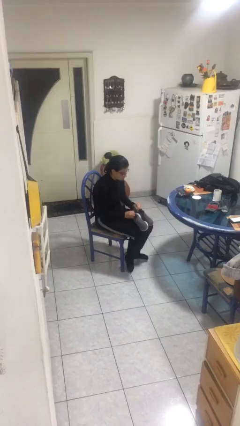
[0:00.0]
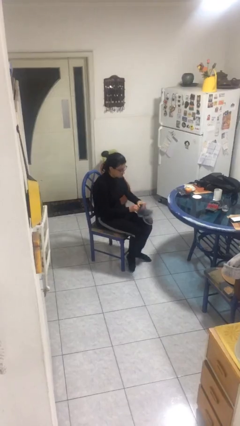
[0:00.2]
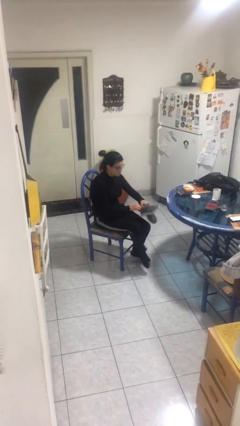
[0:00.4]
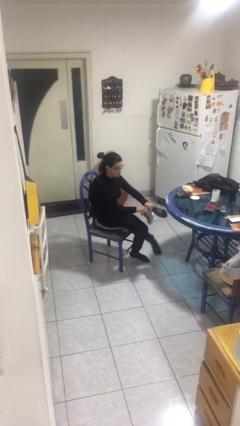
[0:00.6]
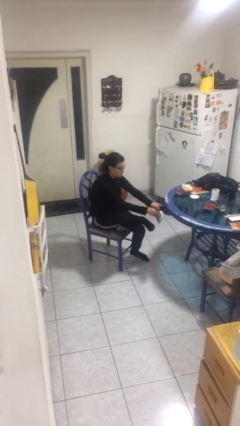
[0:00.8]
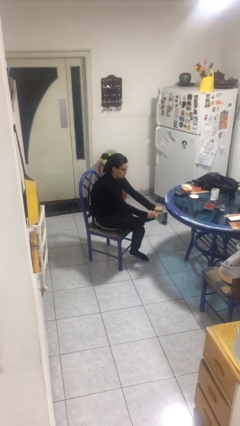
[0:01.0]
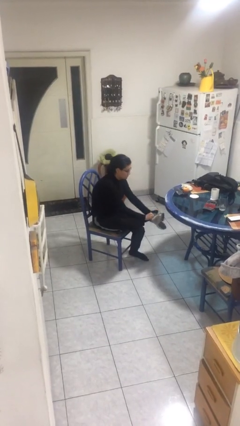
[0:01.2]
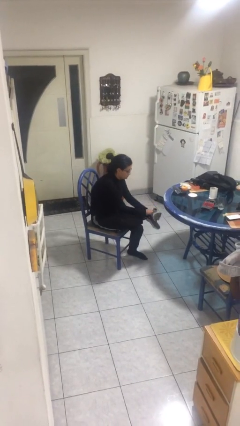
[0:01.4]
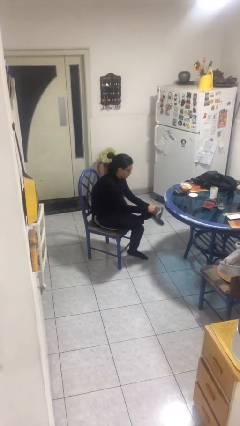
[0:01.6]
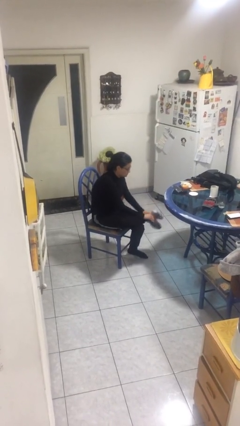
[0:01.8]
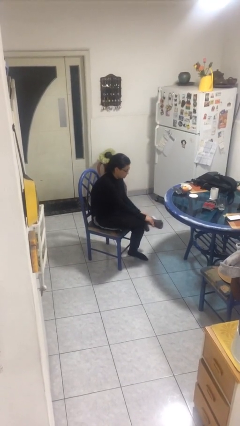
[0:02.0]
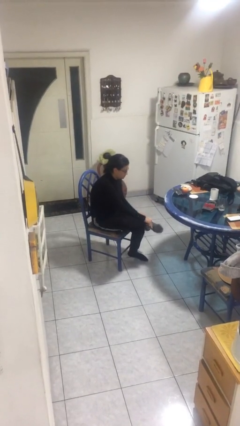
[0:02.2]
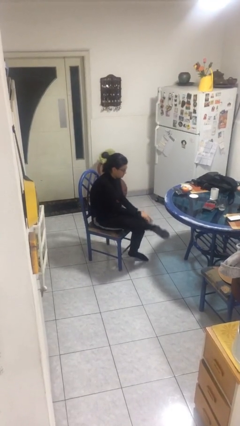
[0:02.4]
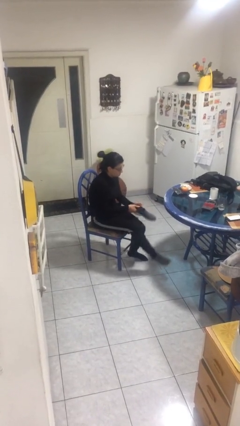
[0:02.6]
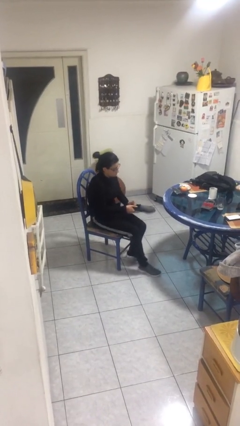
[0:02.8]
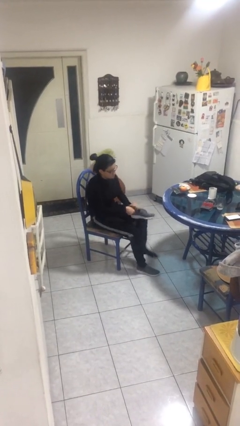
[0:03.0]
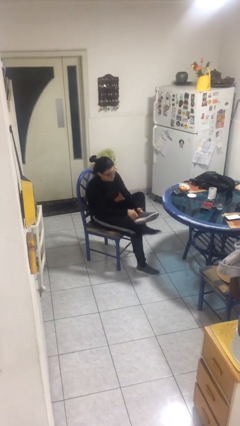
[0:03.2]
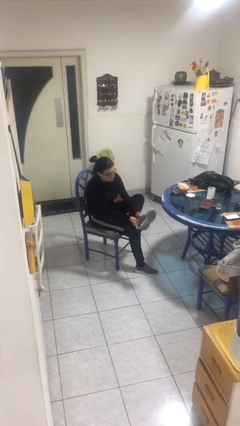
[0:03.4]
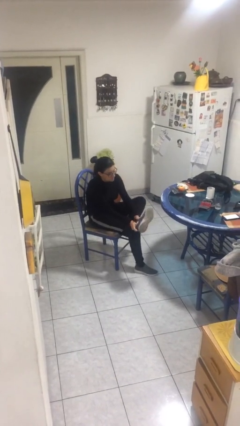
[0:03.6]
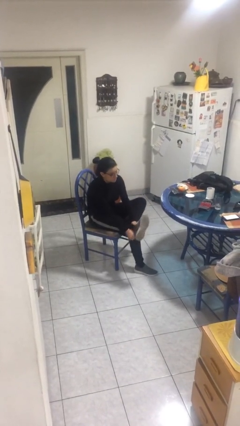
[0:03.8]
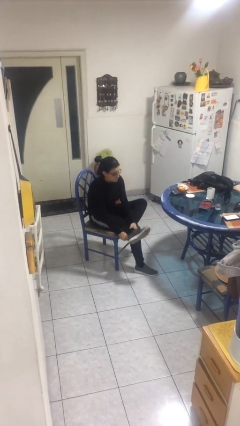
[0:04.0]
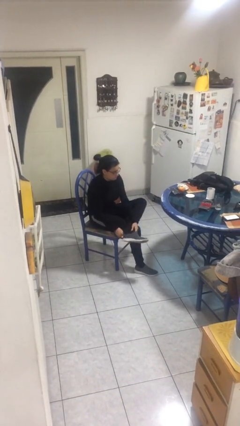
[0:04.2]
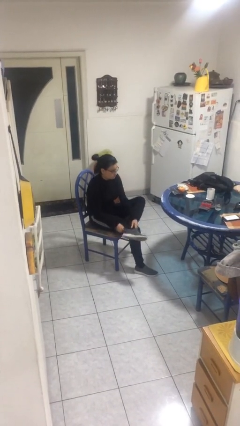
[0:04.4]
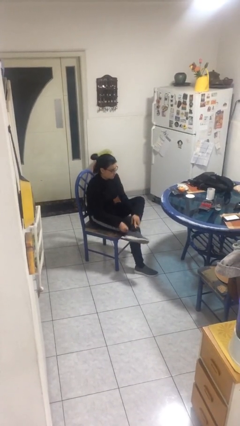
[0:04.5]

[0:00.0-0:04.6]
person puts on shoes

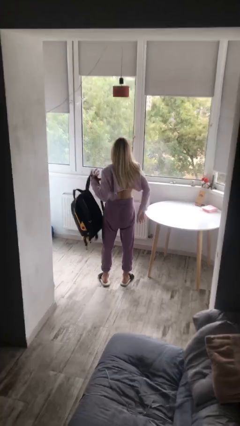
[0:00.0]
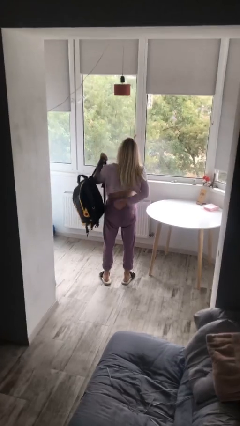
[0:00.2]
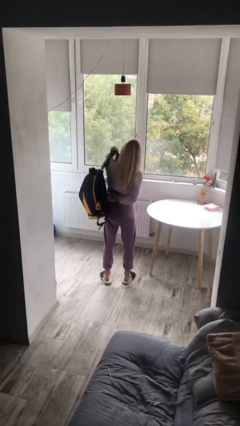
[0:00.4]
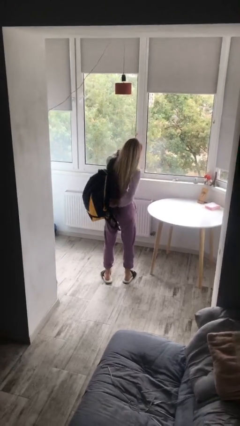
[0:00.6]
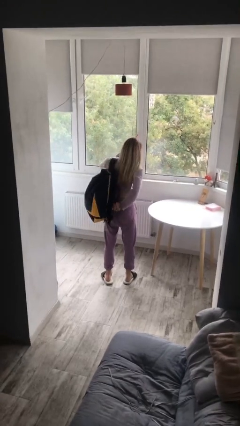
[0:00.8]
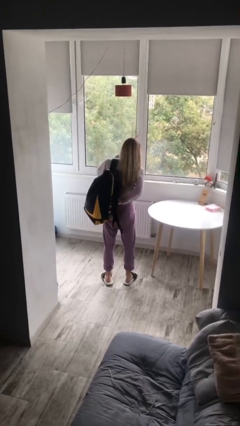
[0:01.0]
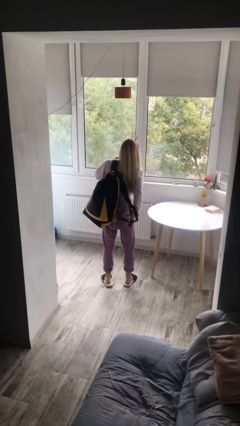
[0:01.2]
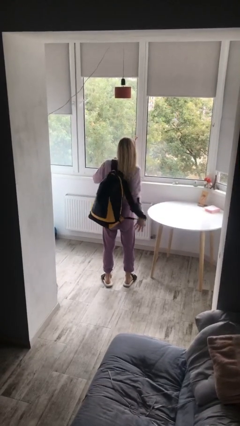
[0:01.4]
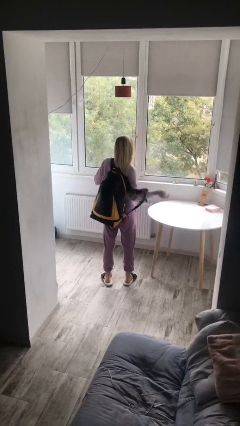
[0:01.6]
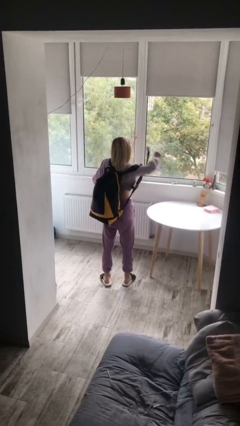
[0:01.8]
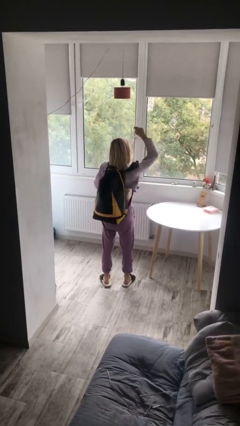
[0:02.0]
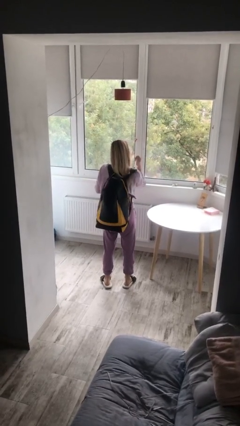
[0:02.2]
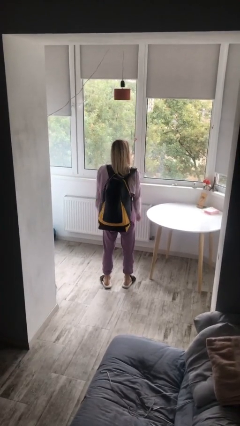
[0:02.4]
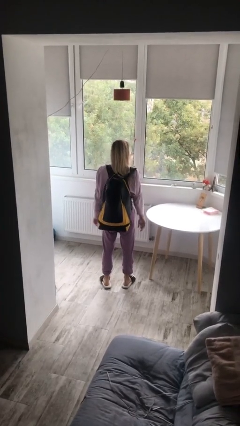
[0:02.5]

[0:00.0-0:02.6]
person puts on backpack

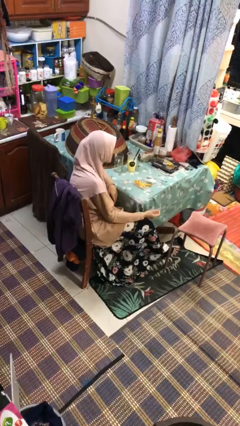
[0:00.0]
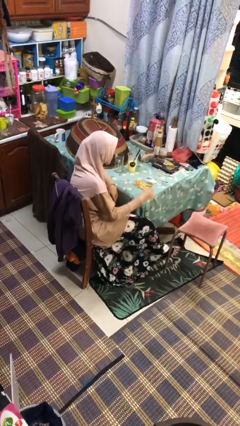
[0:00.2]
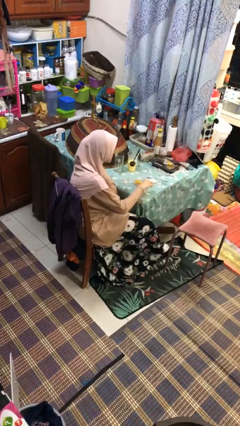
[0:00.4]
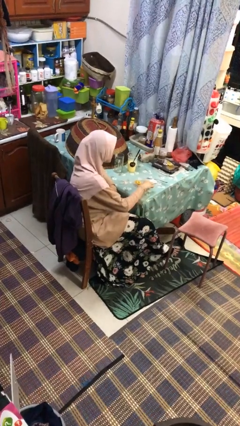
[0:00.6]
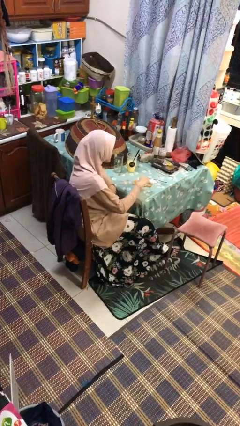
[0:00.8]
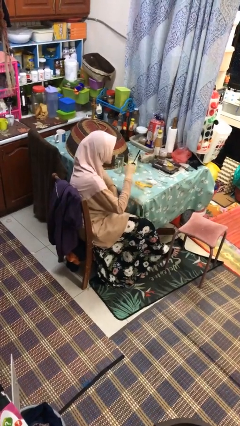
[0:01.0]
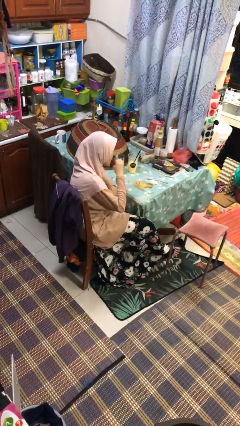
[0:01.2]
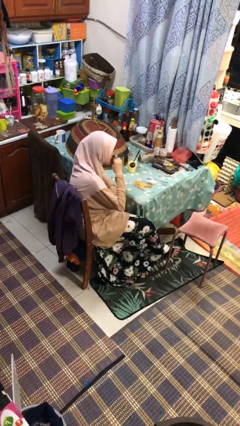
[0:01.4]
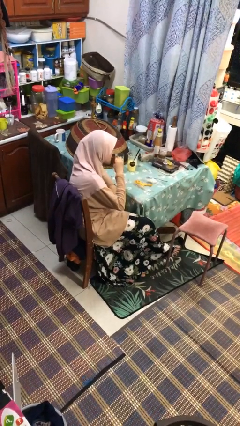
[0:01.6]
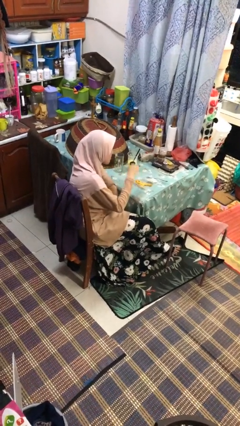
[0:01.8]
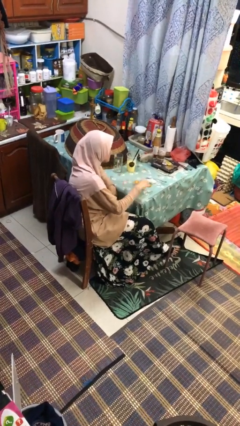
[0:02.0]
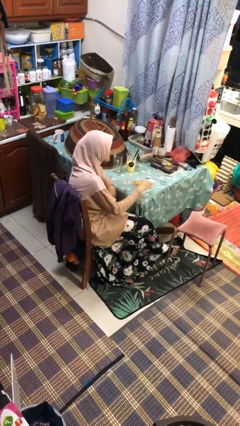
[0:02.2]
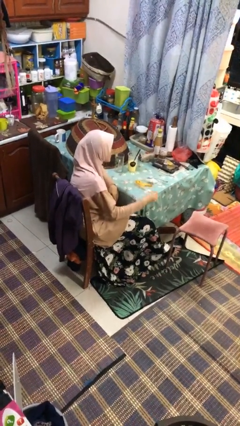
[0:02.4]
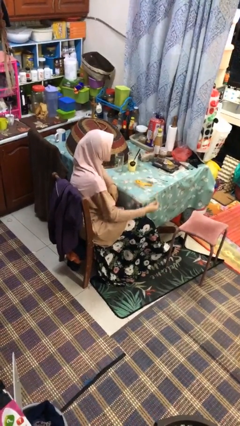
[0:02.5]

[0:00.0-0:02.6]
person eats with hands

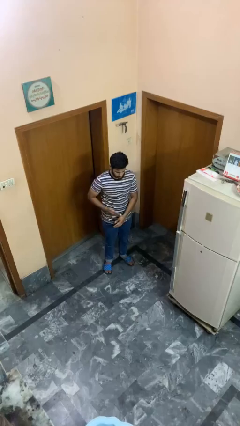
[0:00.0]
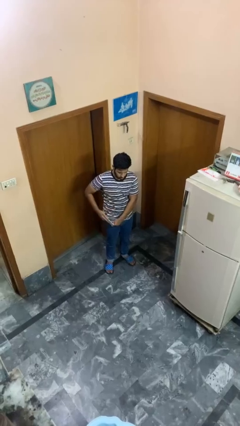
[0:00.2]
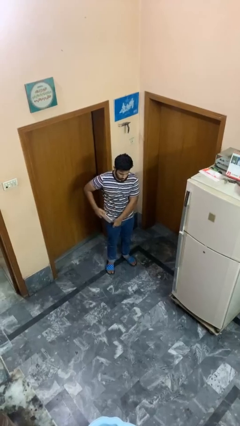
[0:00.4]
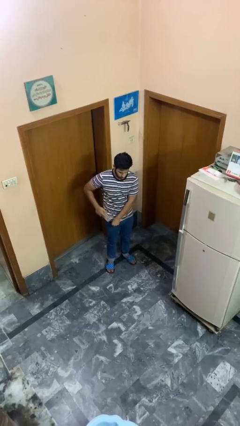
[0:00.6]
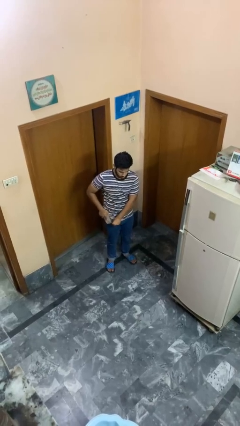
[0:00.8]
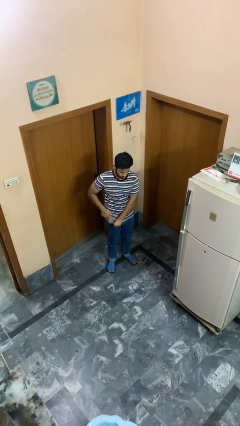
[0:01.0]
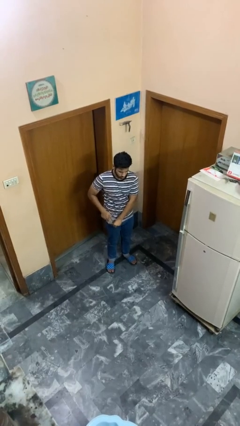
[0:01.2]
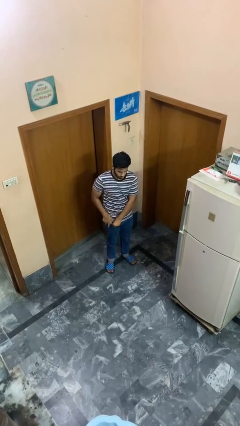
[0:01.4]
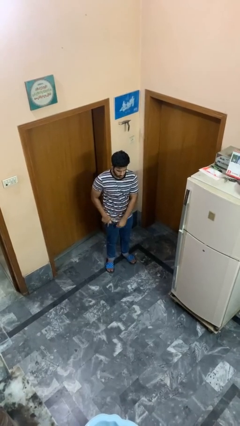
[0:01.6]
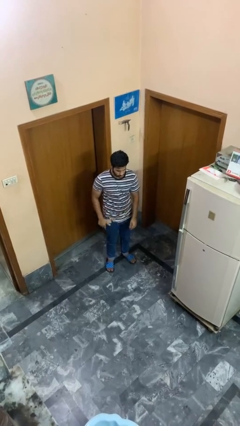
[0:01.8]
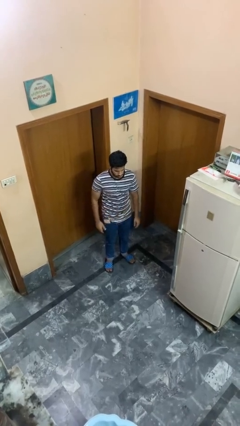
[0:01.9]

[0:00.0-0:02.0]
person puts phone into pocket

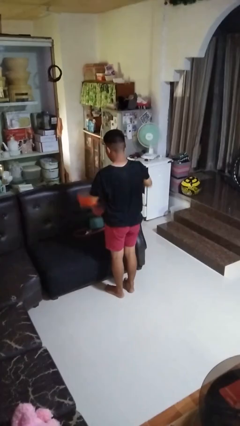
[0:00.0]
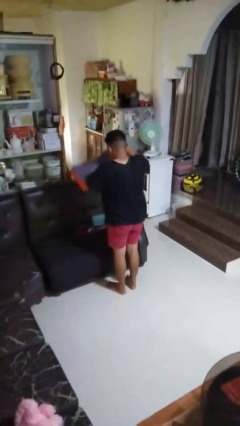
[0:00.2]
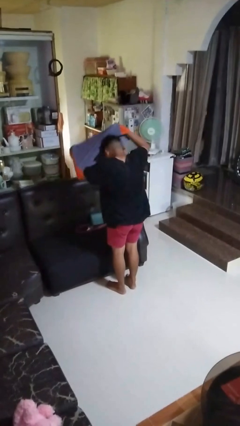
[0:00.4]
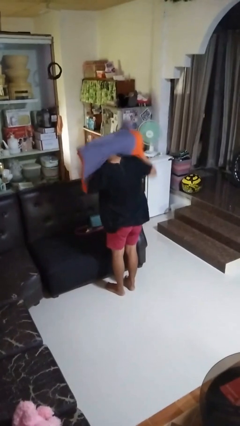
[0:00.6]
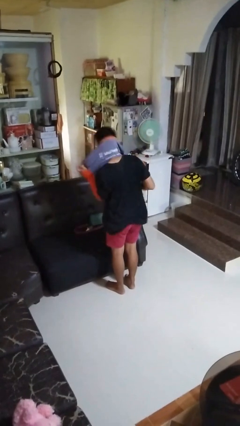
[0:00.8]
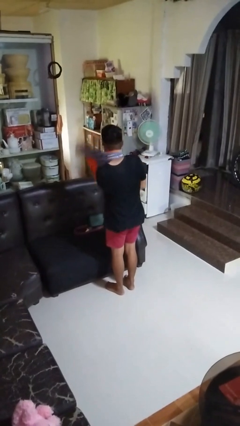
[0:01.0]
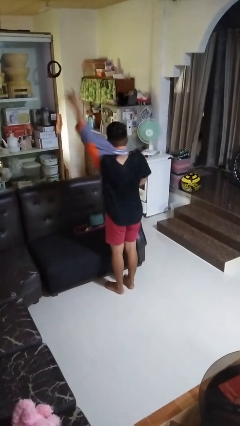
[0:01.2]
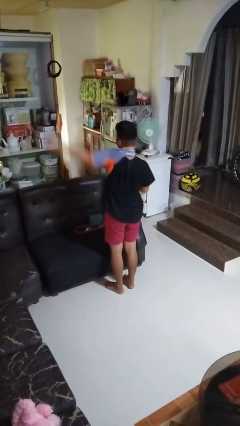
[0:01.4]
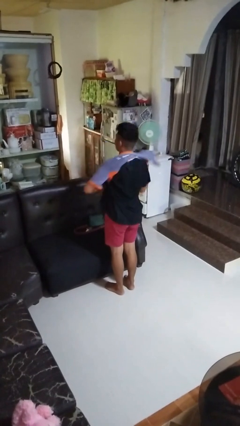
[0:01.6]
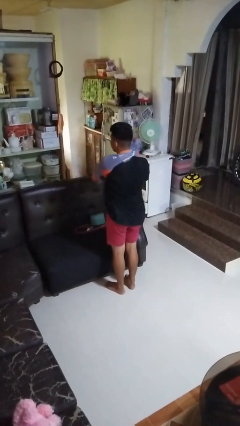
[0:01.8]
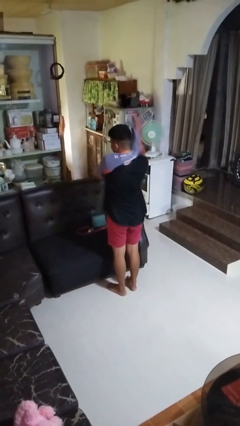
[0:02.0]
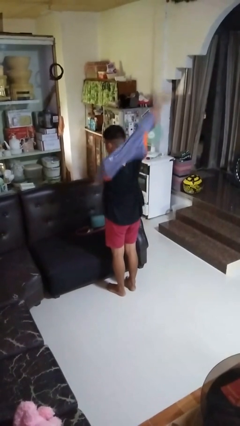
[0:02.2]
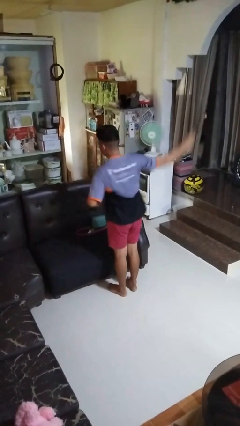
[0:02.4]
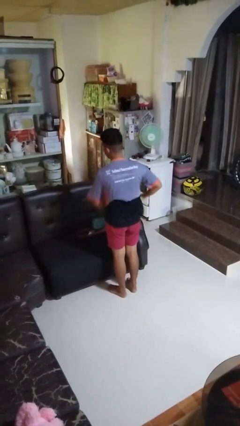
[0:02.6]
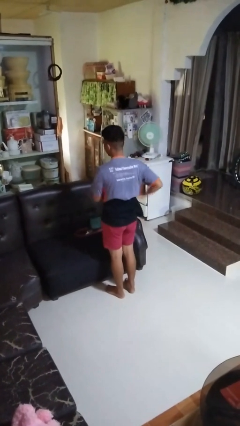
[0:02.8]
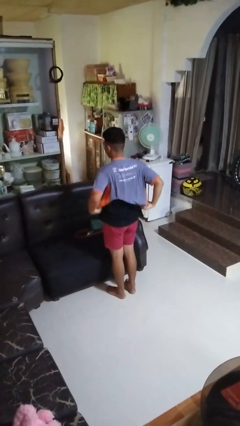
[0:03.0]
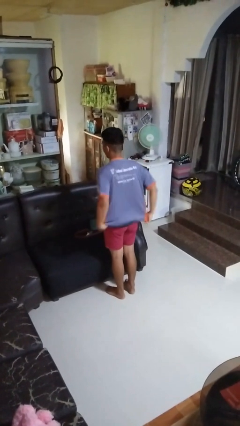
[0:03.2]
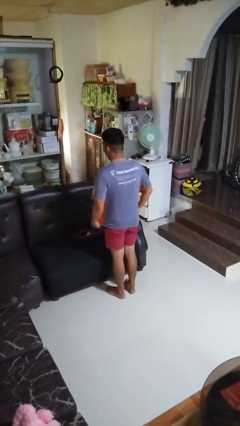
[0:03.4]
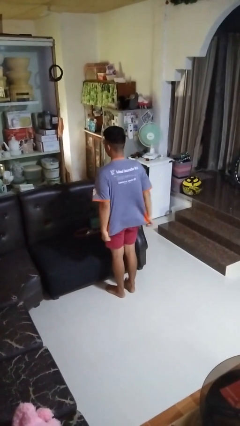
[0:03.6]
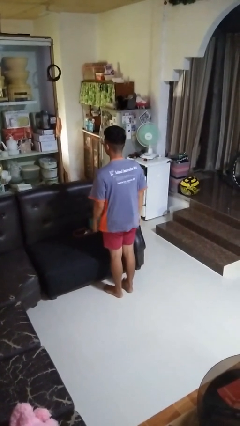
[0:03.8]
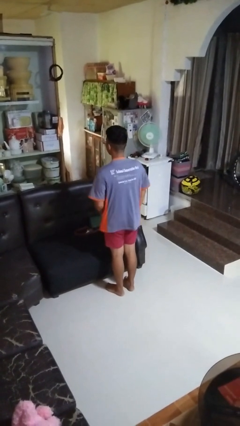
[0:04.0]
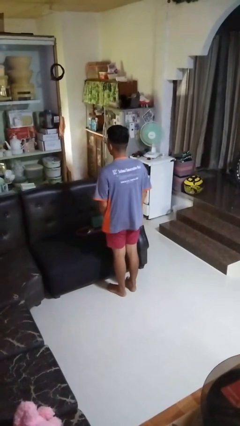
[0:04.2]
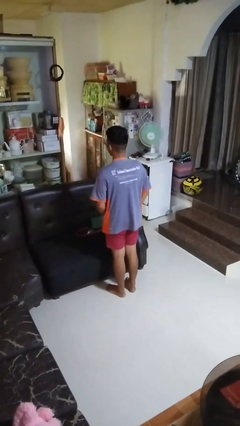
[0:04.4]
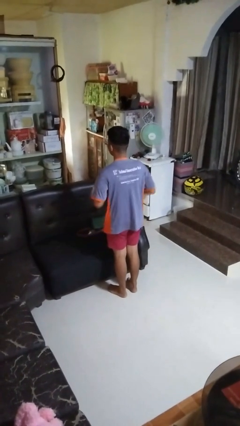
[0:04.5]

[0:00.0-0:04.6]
person puts on shirt

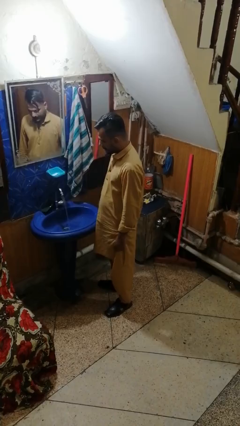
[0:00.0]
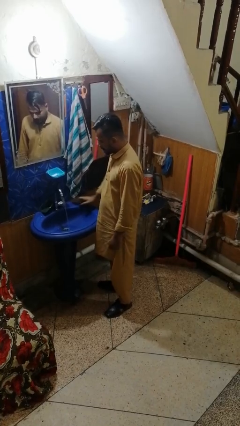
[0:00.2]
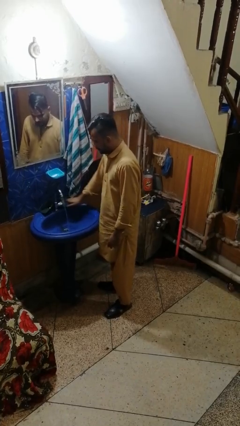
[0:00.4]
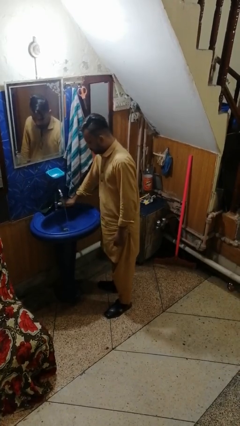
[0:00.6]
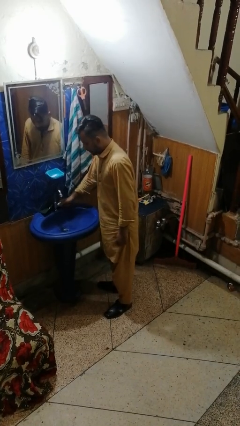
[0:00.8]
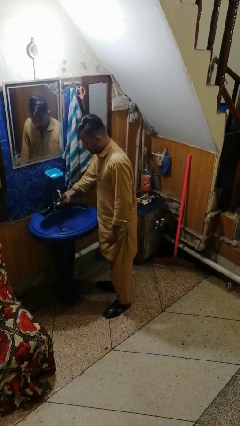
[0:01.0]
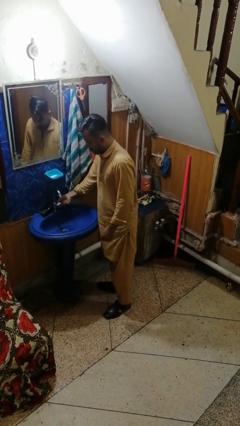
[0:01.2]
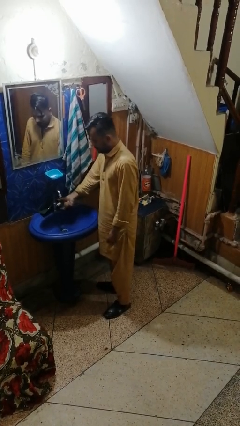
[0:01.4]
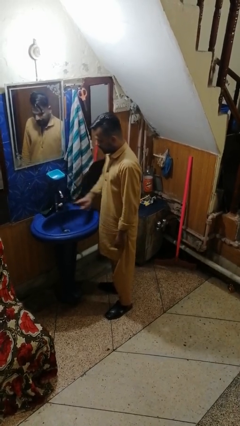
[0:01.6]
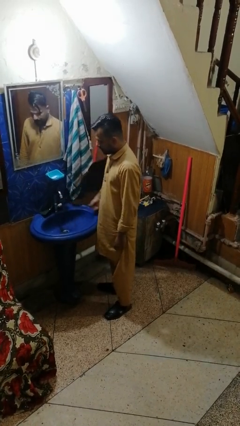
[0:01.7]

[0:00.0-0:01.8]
person turns off faucet
